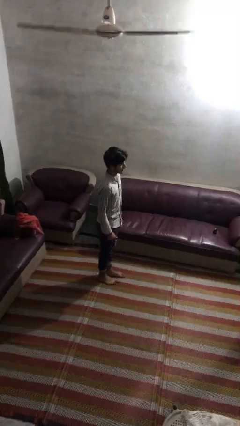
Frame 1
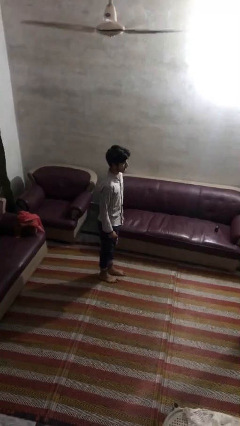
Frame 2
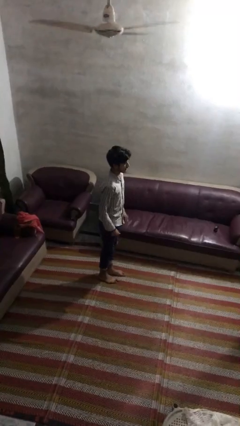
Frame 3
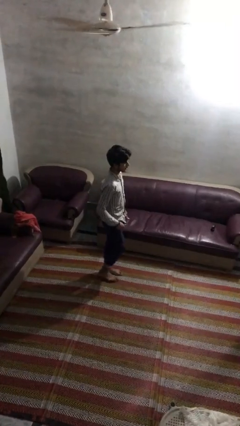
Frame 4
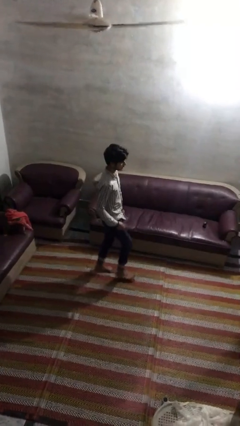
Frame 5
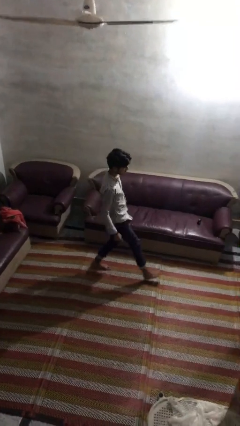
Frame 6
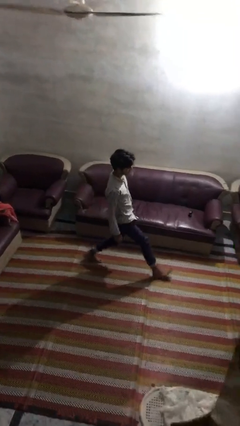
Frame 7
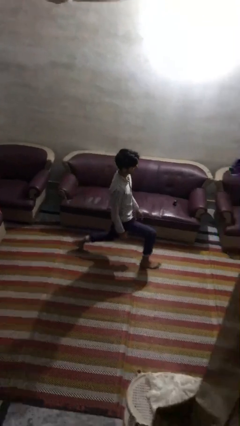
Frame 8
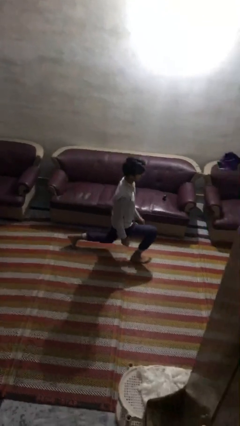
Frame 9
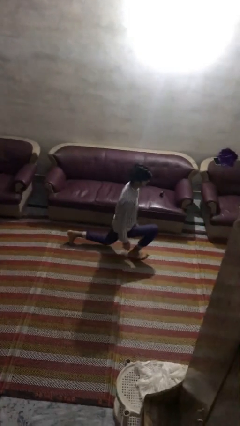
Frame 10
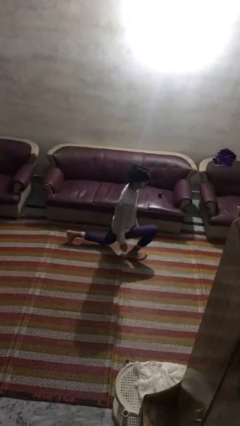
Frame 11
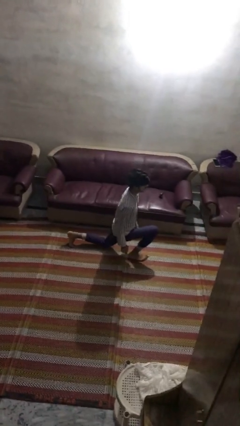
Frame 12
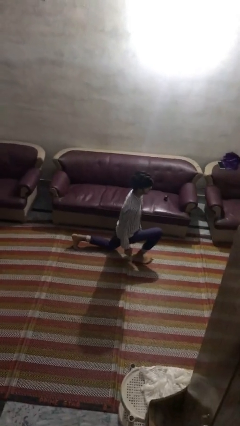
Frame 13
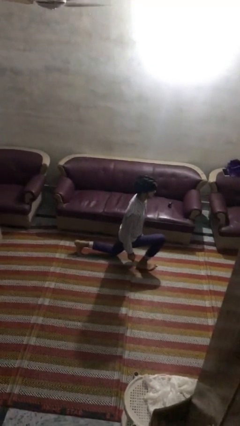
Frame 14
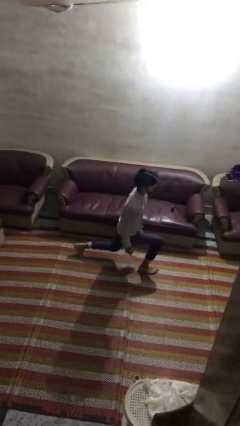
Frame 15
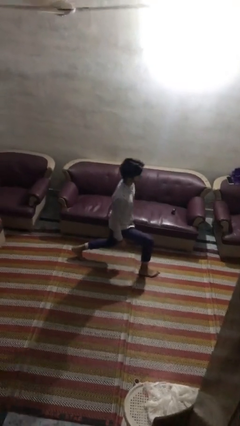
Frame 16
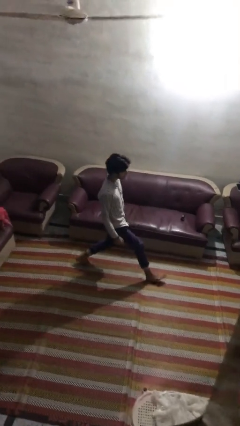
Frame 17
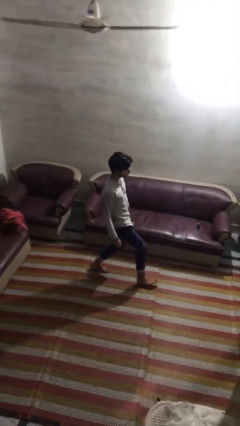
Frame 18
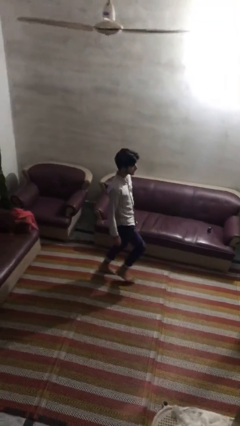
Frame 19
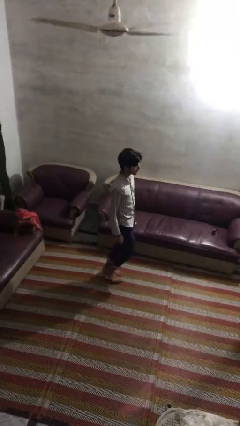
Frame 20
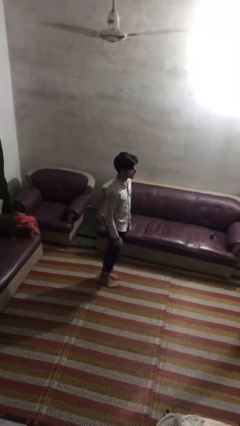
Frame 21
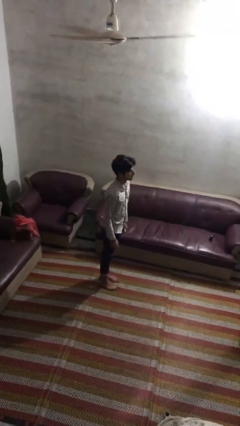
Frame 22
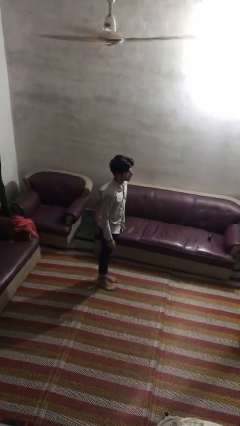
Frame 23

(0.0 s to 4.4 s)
person exercises with lunges

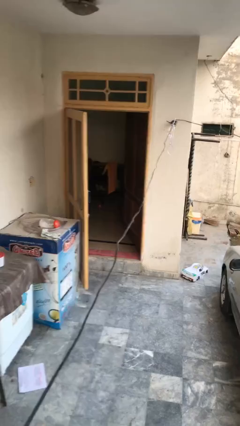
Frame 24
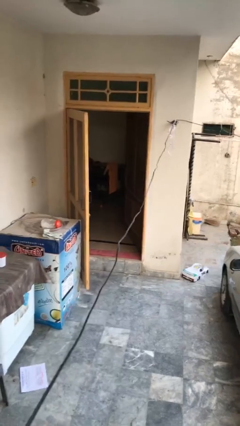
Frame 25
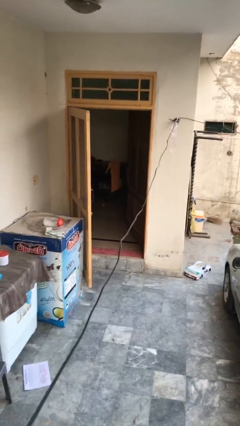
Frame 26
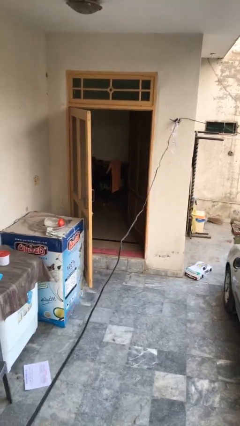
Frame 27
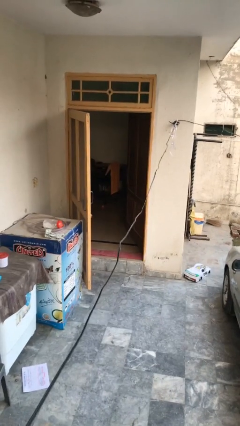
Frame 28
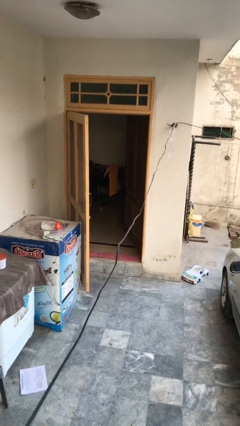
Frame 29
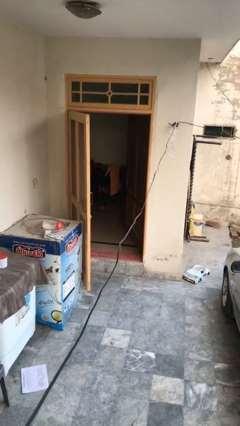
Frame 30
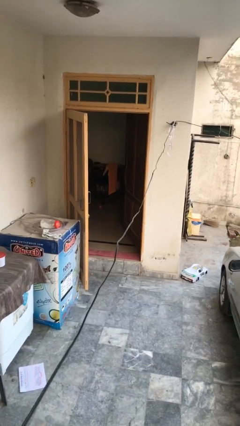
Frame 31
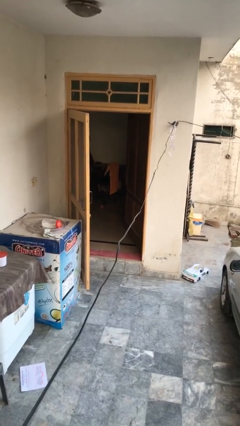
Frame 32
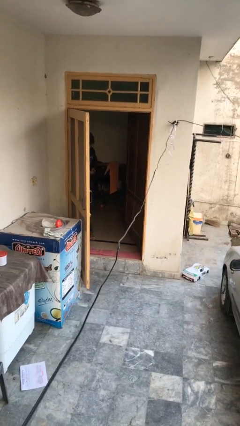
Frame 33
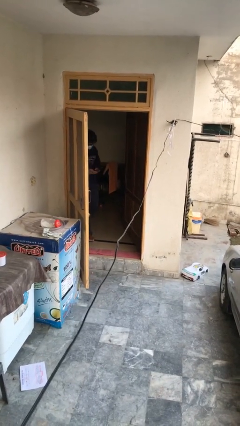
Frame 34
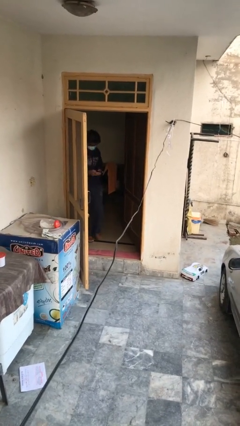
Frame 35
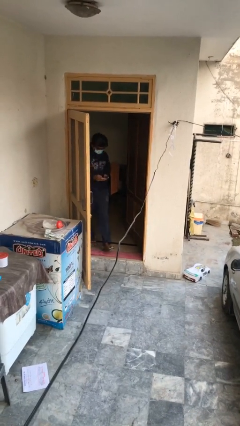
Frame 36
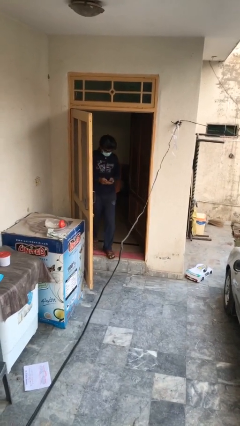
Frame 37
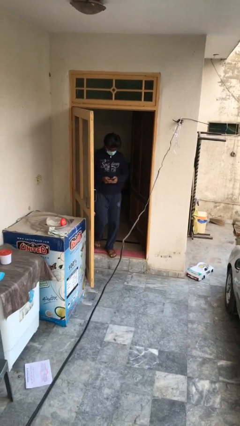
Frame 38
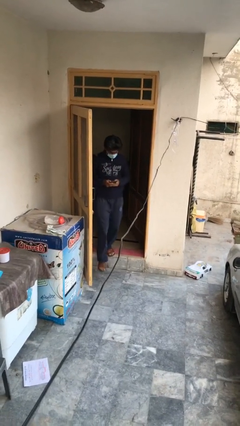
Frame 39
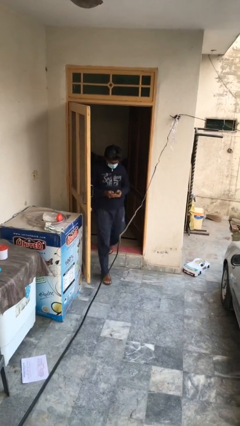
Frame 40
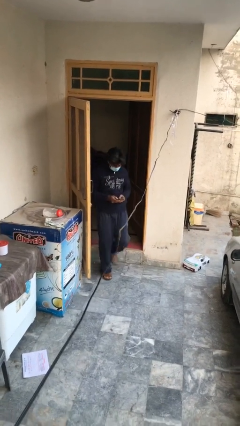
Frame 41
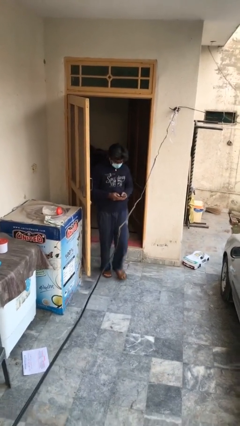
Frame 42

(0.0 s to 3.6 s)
person enters scene through structure

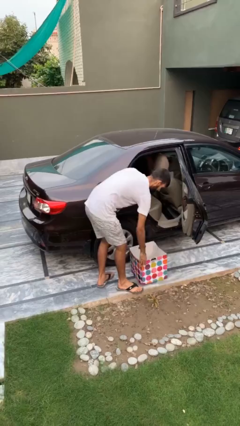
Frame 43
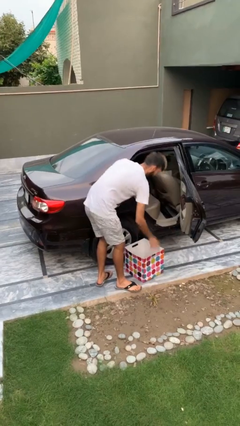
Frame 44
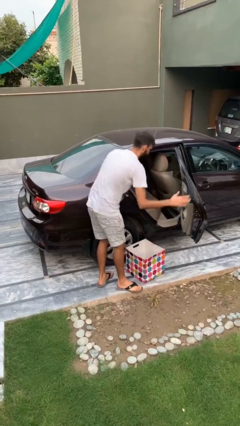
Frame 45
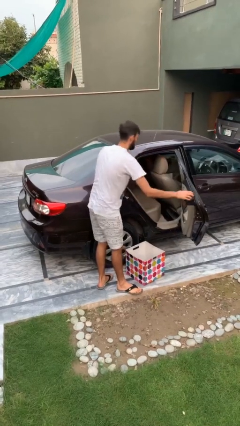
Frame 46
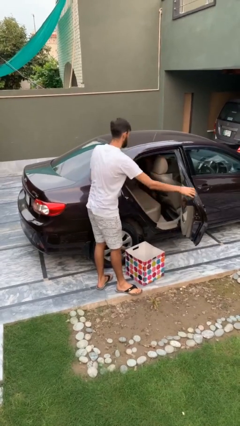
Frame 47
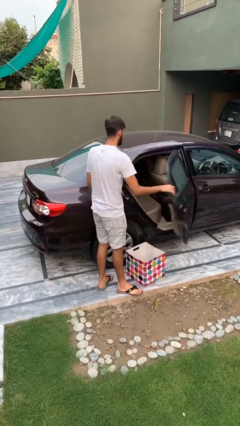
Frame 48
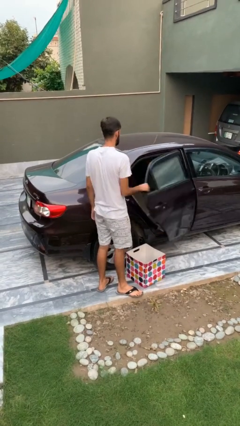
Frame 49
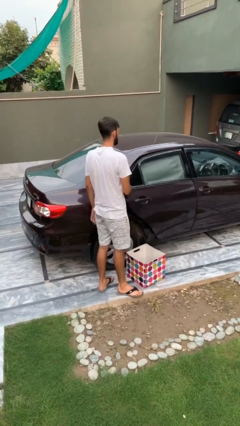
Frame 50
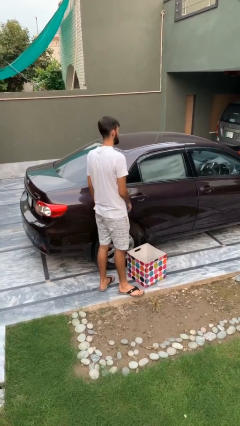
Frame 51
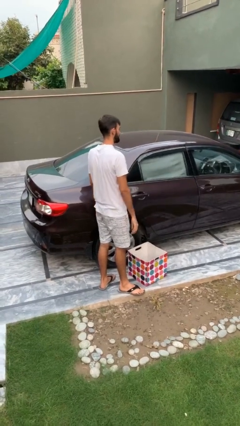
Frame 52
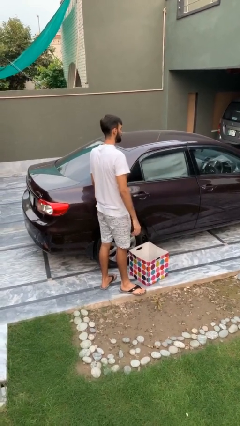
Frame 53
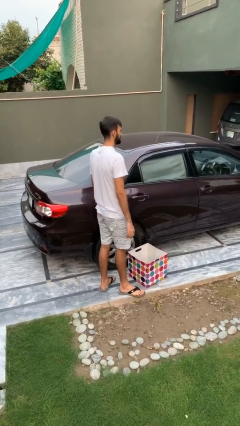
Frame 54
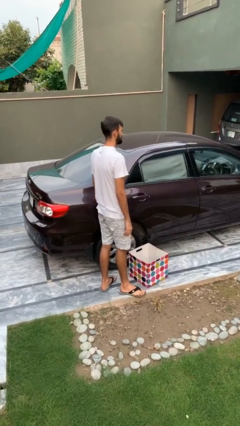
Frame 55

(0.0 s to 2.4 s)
person closes car door

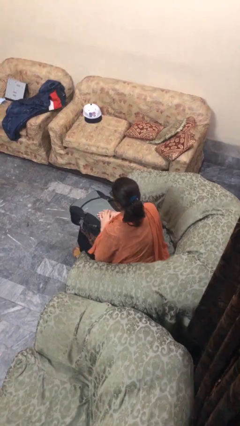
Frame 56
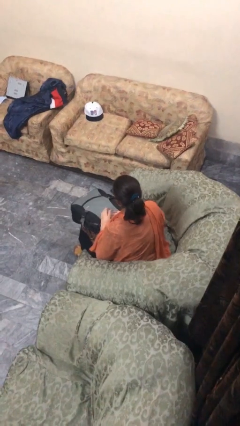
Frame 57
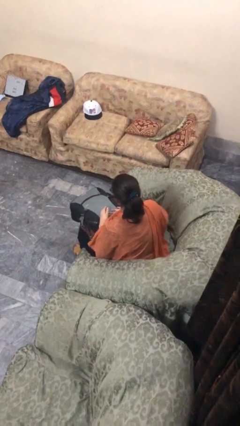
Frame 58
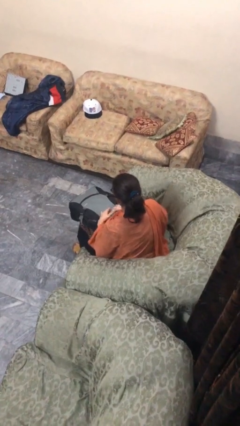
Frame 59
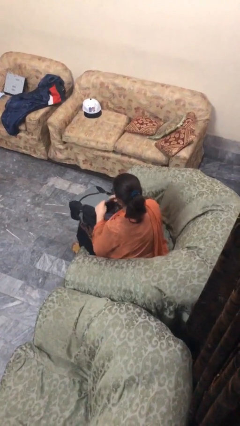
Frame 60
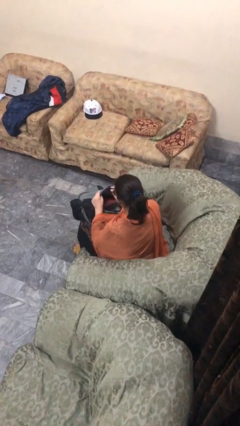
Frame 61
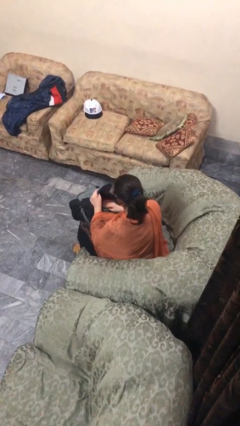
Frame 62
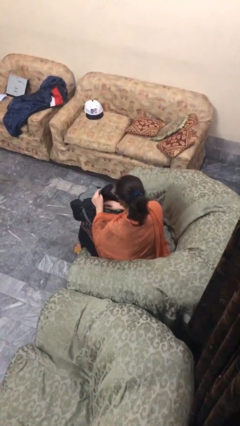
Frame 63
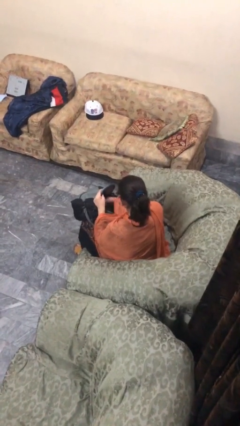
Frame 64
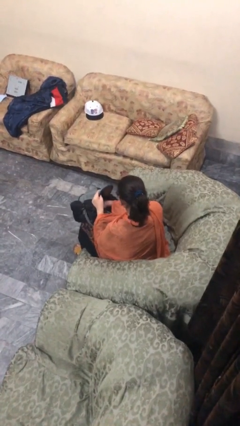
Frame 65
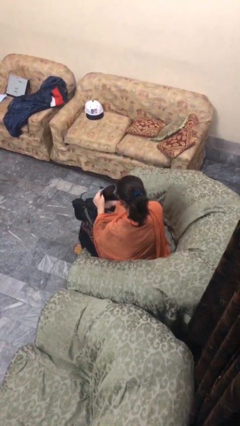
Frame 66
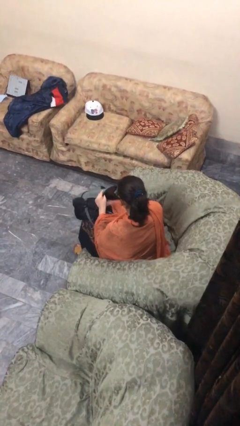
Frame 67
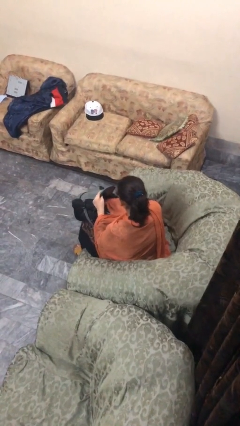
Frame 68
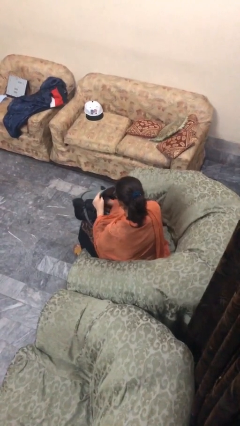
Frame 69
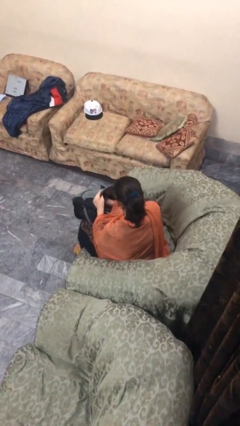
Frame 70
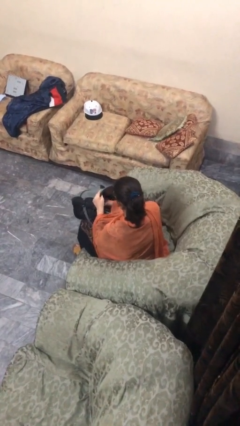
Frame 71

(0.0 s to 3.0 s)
person searches in backpack

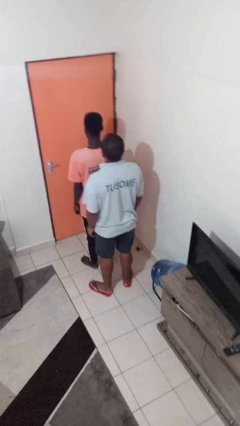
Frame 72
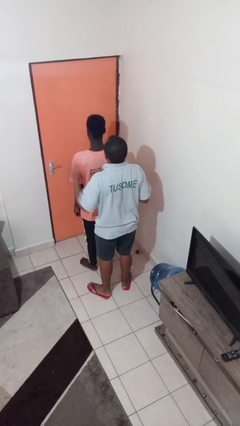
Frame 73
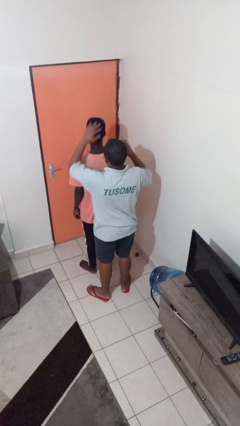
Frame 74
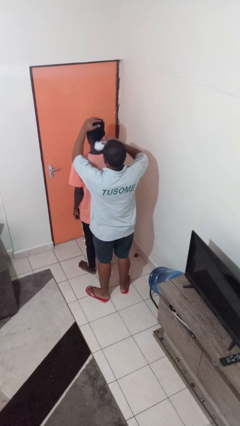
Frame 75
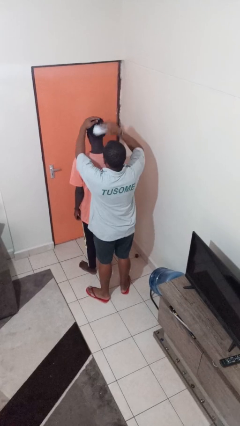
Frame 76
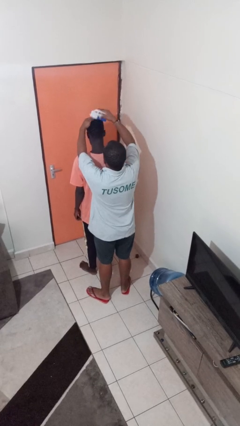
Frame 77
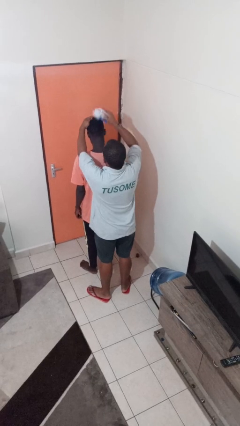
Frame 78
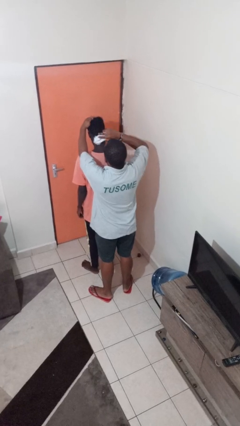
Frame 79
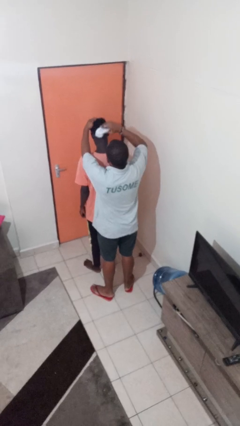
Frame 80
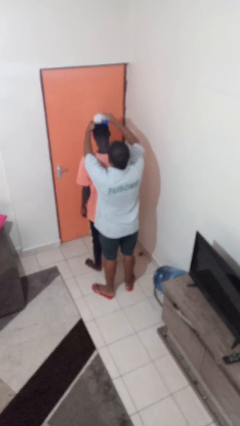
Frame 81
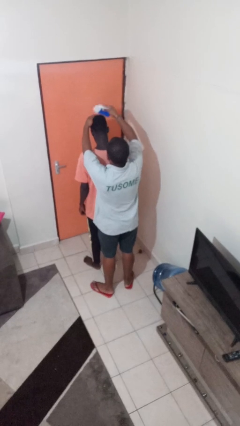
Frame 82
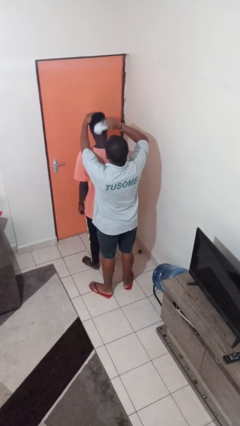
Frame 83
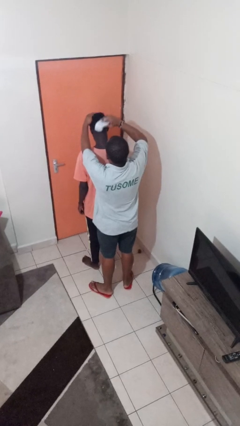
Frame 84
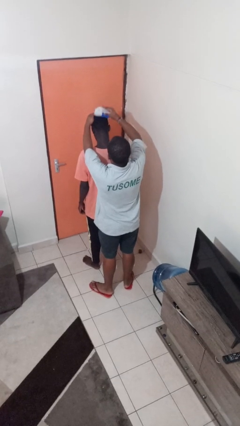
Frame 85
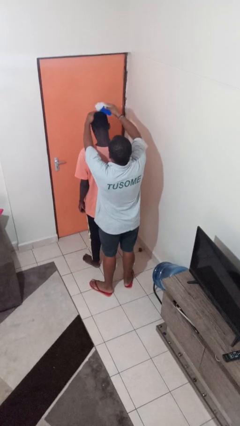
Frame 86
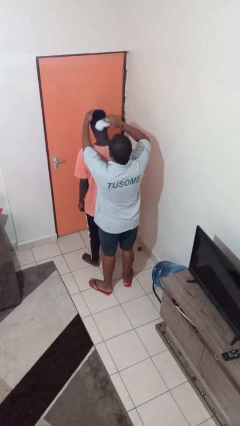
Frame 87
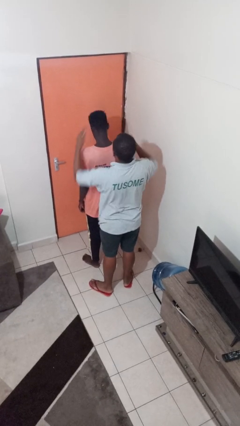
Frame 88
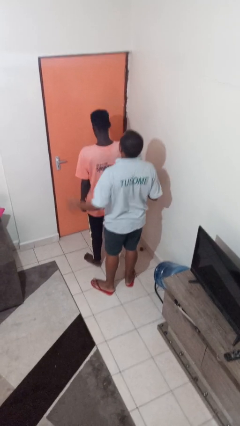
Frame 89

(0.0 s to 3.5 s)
person brushes hair of person

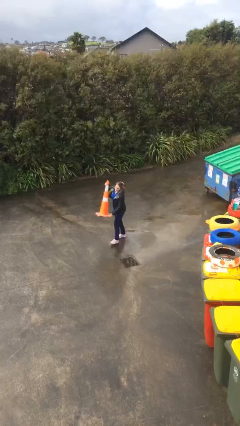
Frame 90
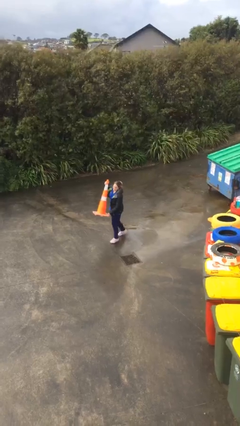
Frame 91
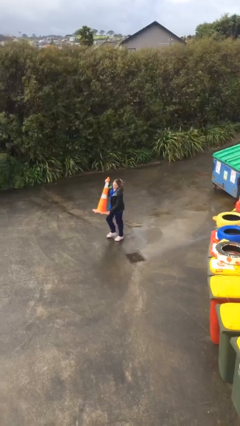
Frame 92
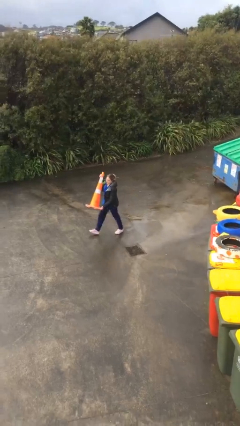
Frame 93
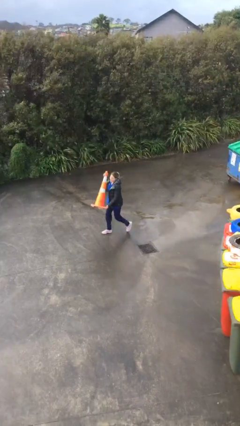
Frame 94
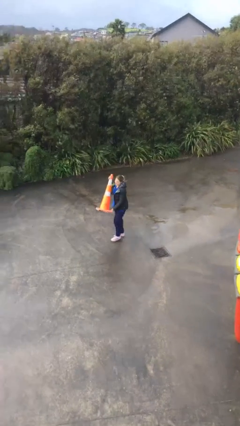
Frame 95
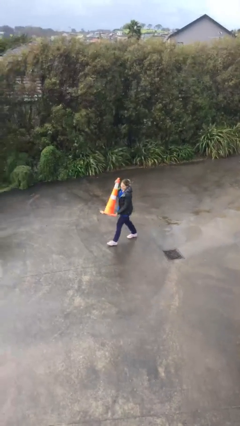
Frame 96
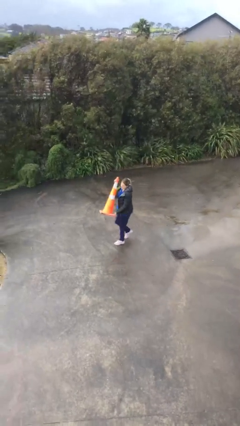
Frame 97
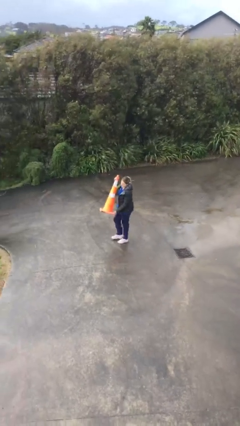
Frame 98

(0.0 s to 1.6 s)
person carries heavy object
